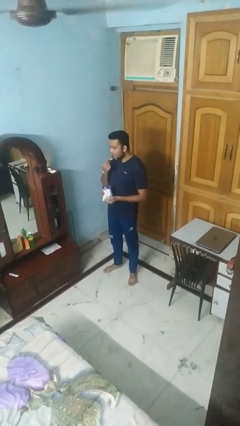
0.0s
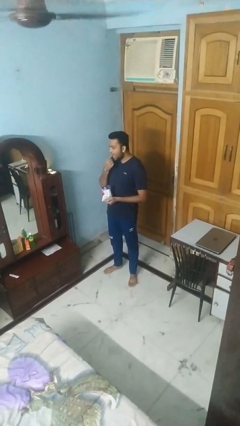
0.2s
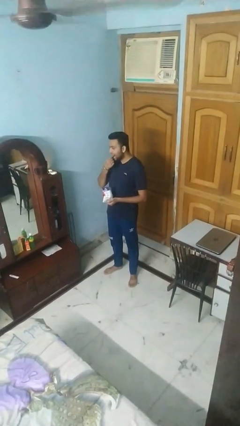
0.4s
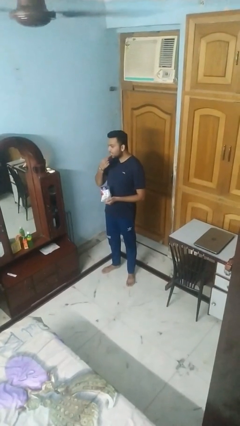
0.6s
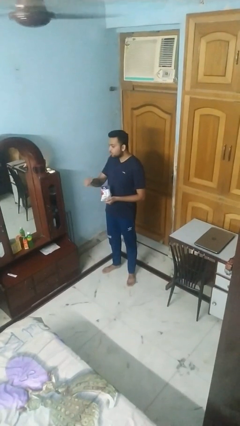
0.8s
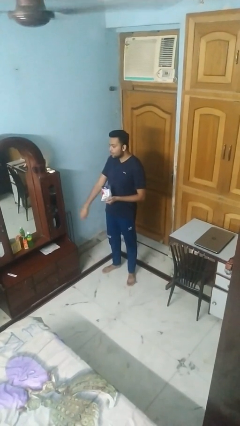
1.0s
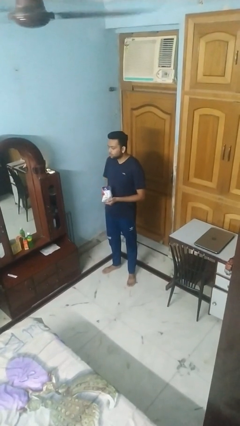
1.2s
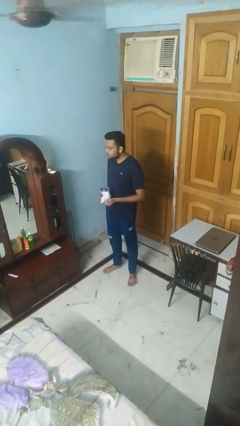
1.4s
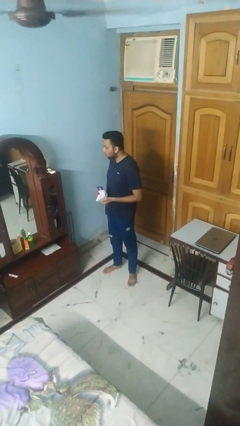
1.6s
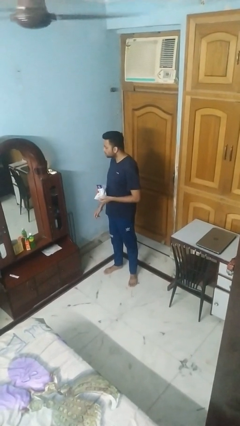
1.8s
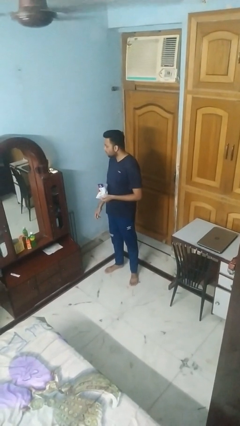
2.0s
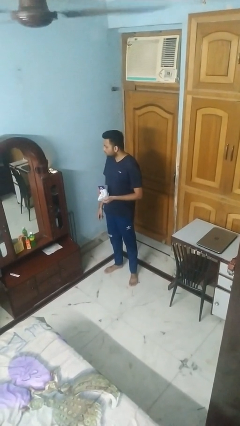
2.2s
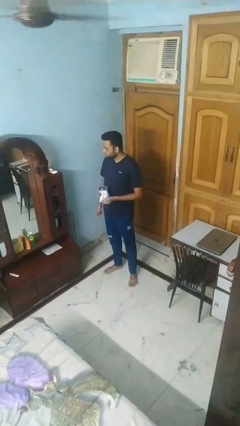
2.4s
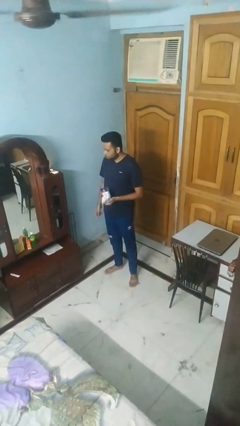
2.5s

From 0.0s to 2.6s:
person eats snack from bag

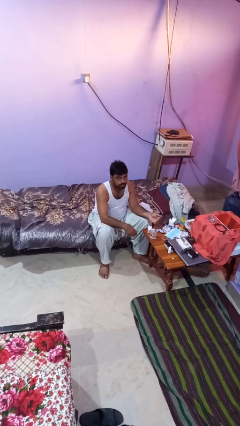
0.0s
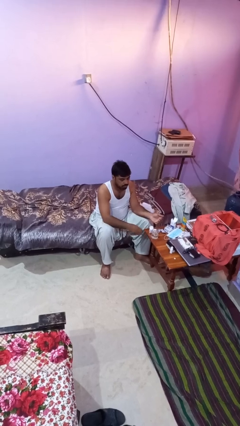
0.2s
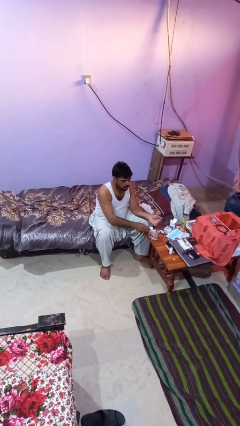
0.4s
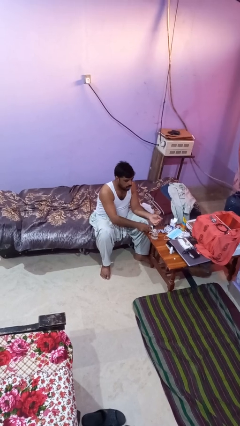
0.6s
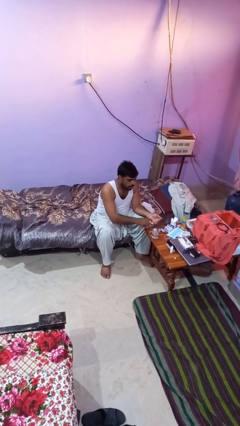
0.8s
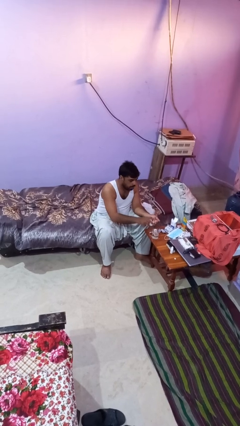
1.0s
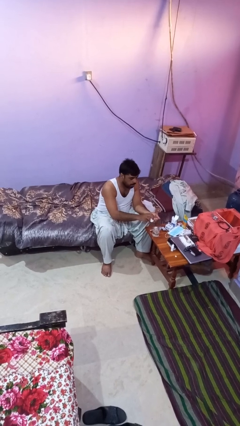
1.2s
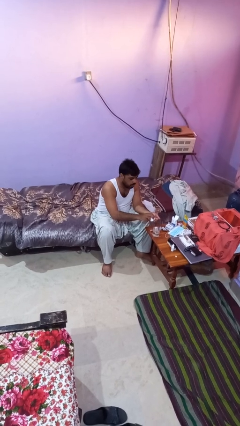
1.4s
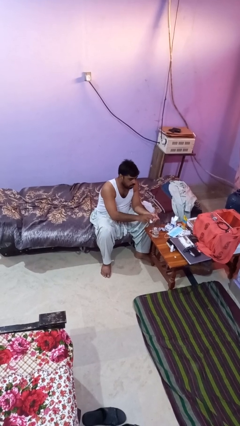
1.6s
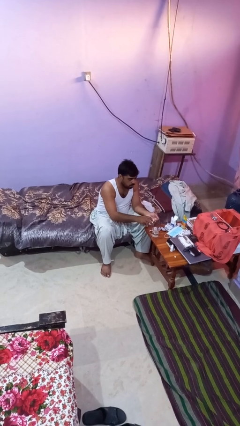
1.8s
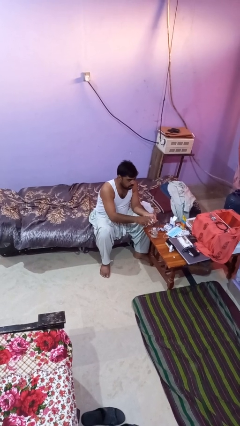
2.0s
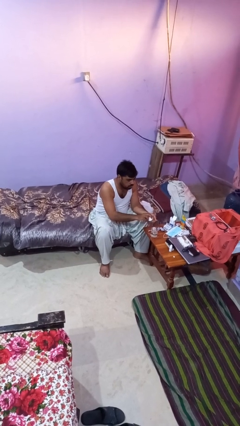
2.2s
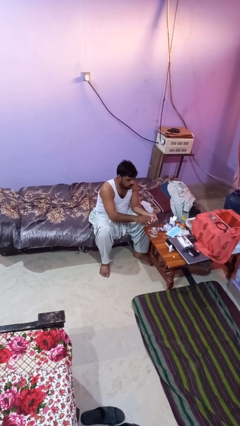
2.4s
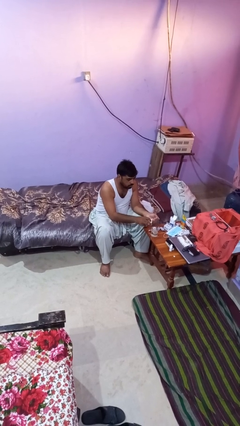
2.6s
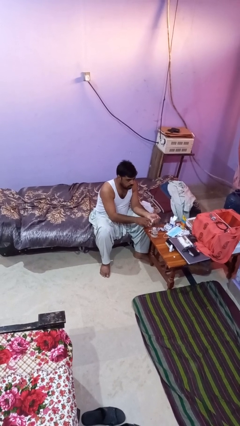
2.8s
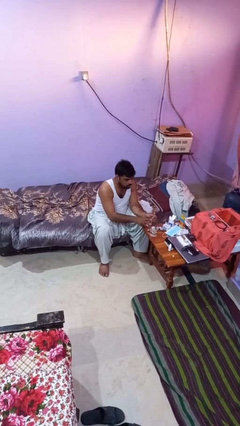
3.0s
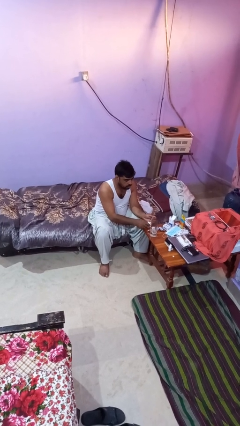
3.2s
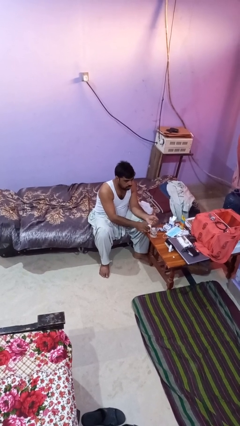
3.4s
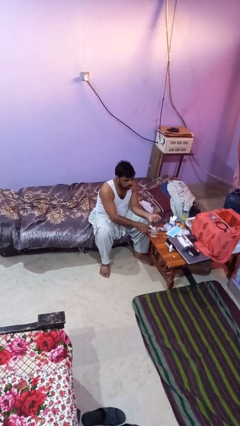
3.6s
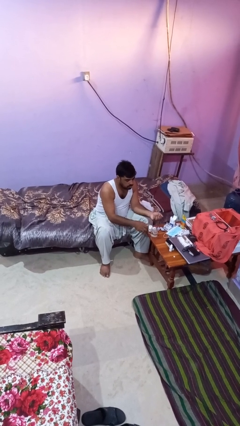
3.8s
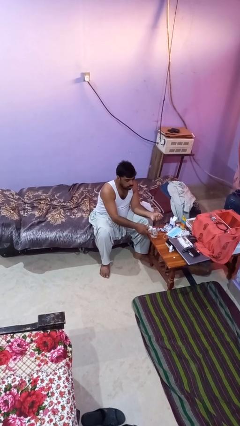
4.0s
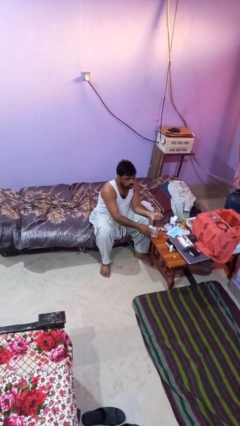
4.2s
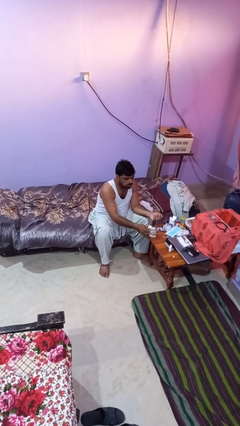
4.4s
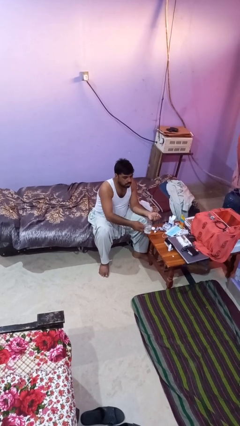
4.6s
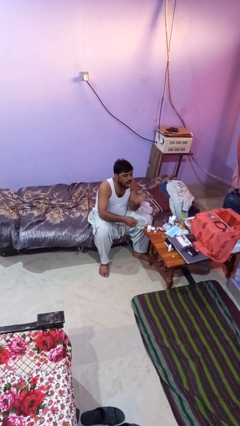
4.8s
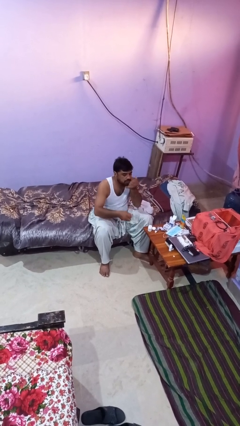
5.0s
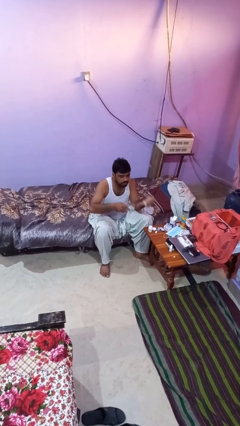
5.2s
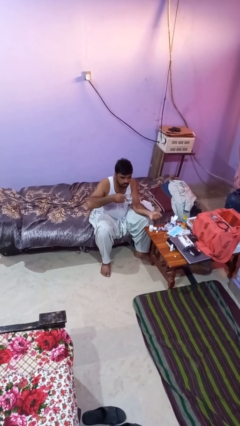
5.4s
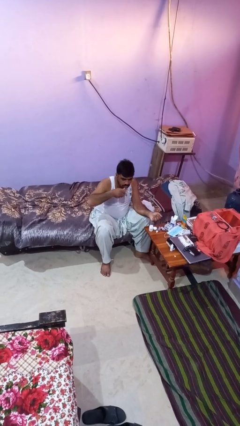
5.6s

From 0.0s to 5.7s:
person takes medicine pills

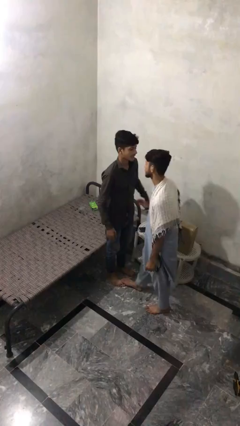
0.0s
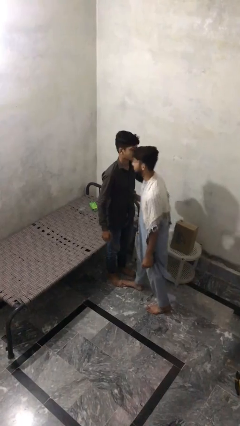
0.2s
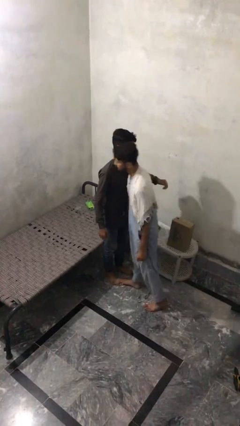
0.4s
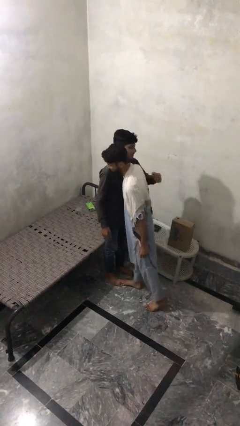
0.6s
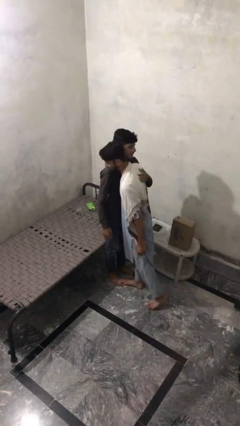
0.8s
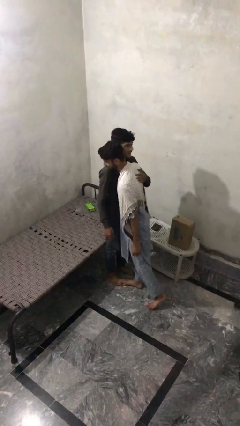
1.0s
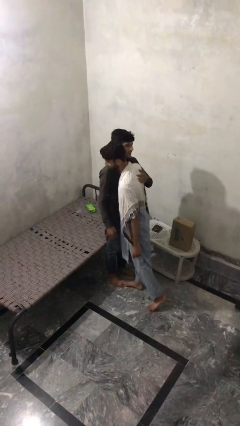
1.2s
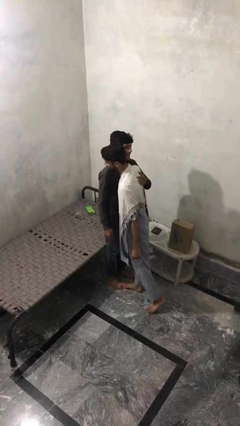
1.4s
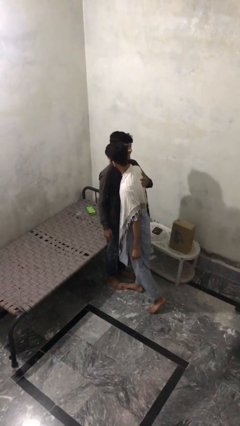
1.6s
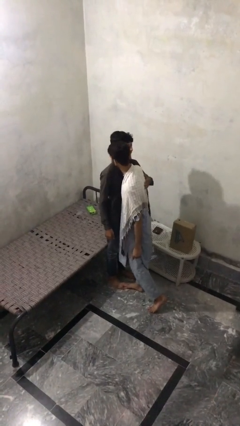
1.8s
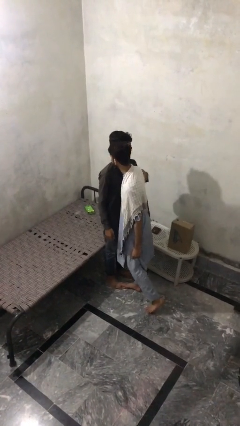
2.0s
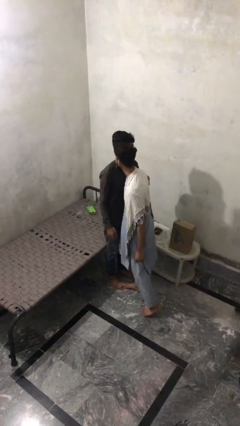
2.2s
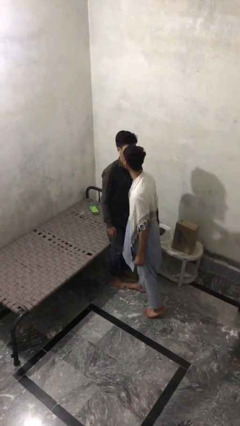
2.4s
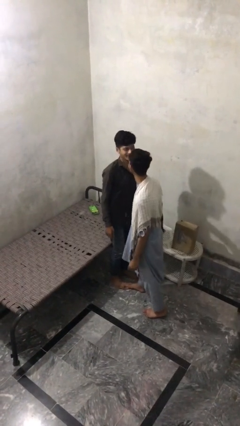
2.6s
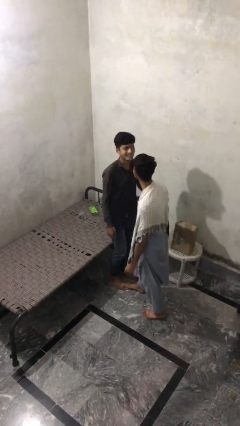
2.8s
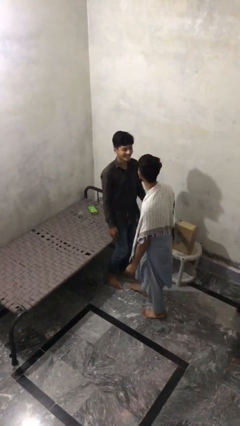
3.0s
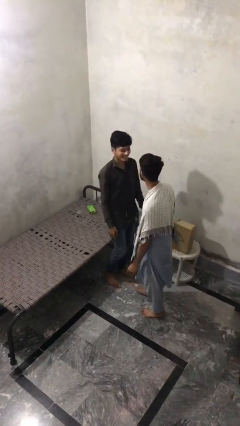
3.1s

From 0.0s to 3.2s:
person embraces person

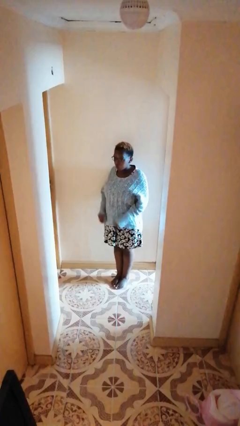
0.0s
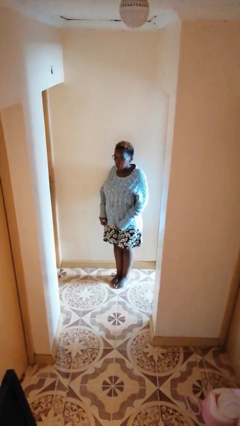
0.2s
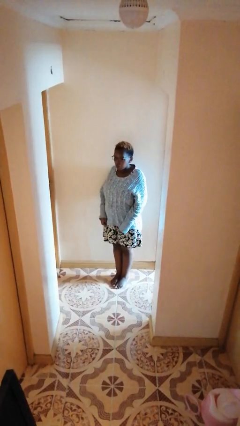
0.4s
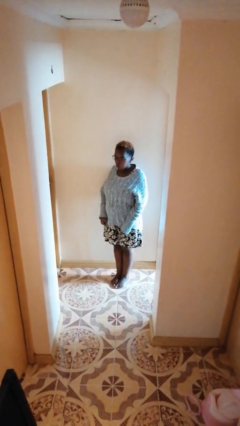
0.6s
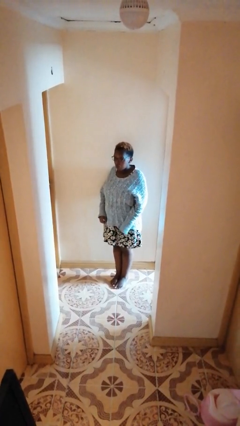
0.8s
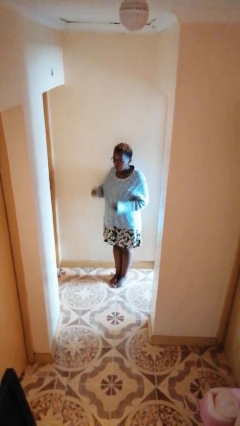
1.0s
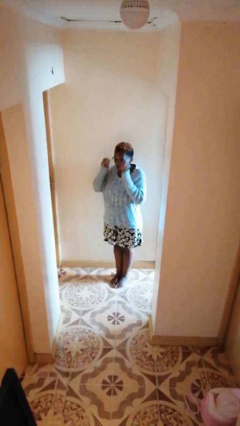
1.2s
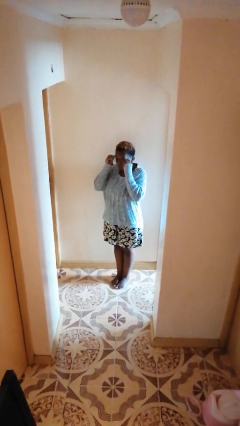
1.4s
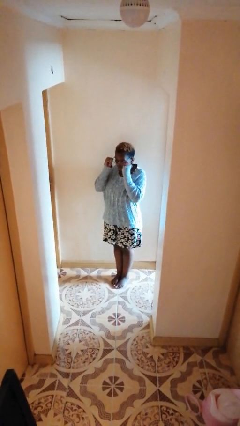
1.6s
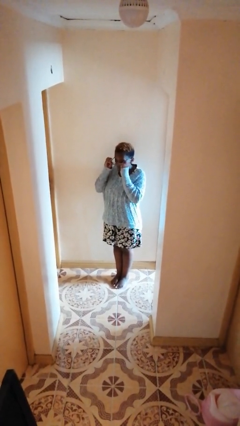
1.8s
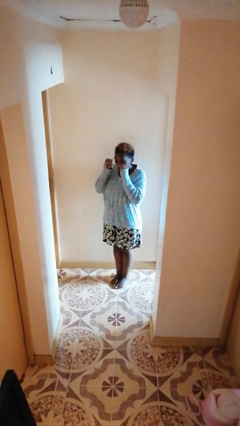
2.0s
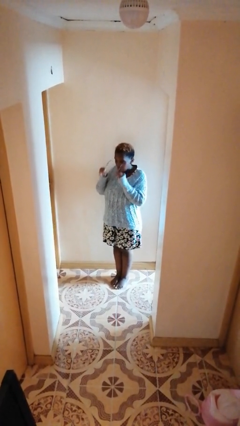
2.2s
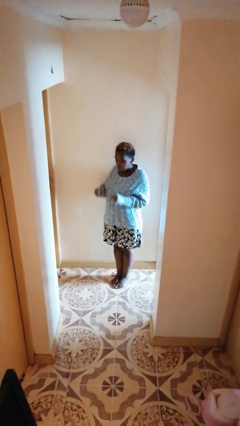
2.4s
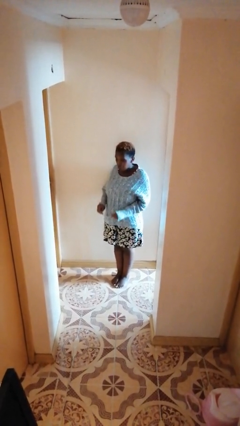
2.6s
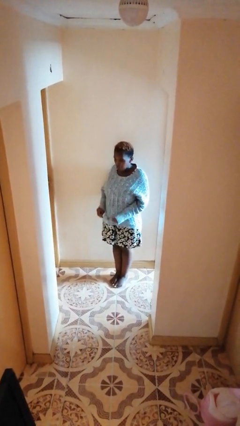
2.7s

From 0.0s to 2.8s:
person takes off glasses

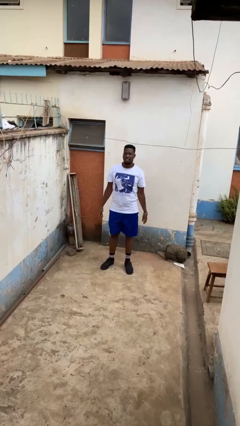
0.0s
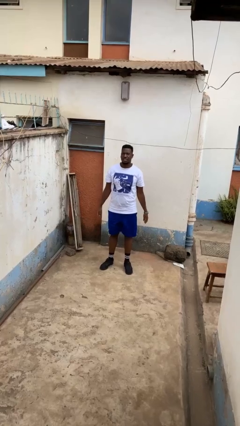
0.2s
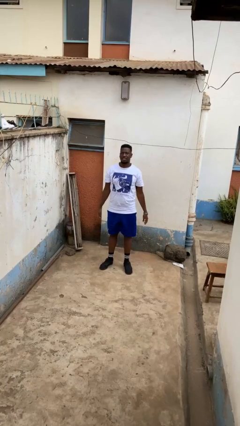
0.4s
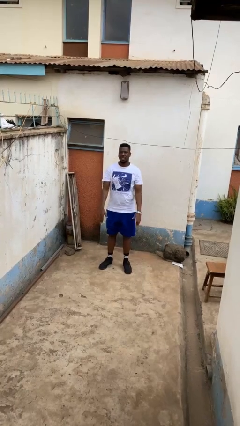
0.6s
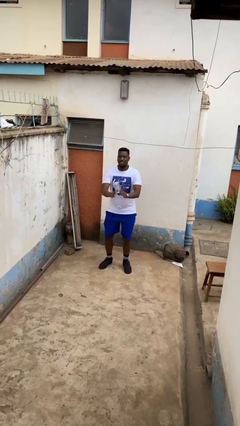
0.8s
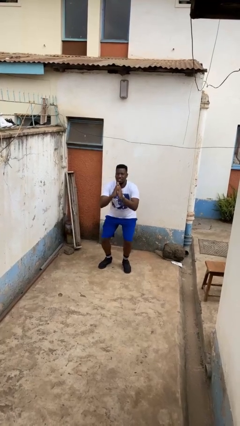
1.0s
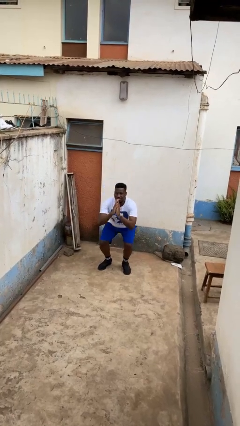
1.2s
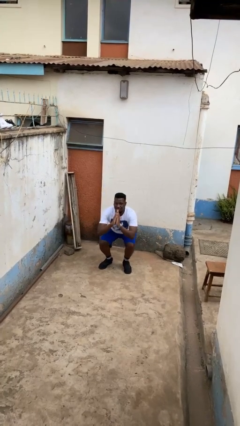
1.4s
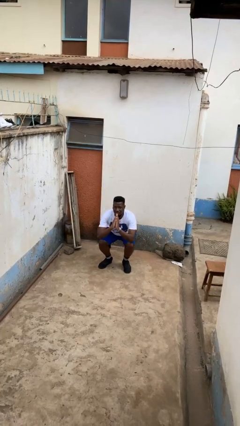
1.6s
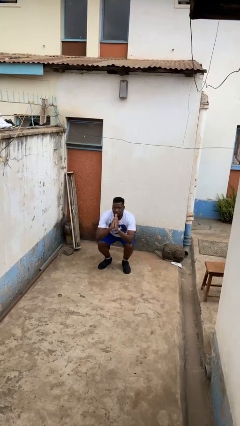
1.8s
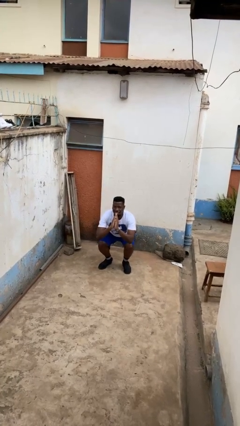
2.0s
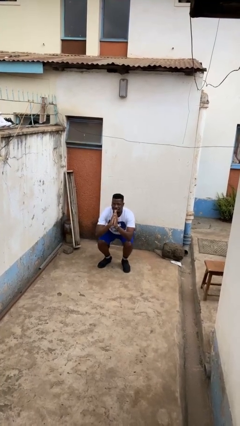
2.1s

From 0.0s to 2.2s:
person squats

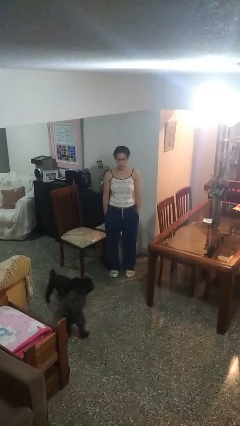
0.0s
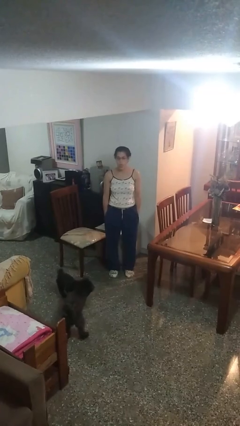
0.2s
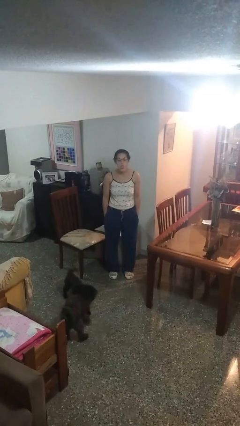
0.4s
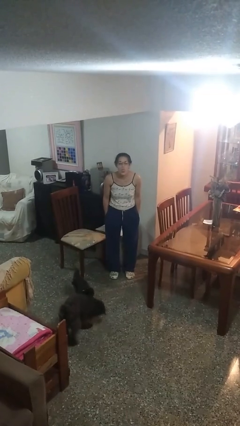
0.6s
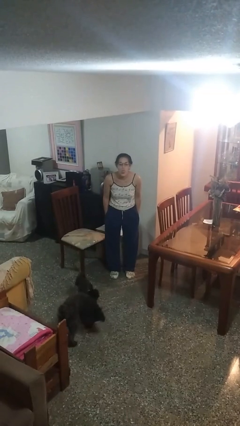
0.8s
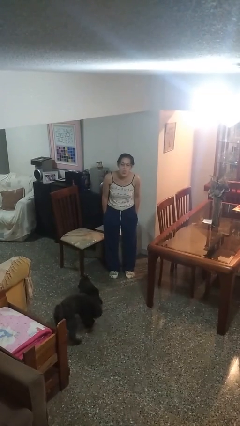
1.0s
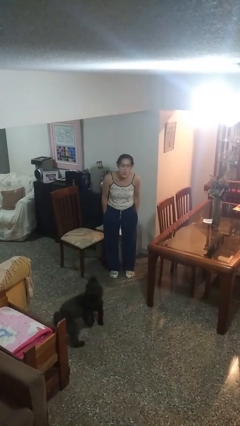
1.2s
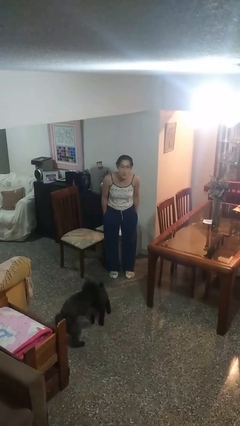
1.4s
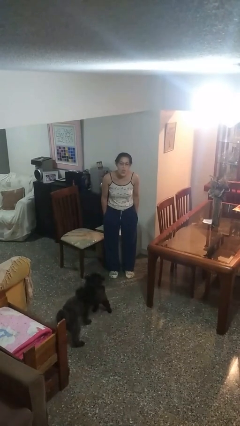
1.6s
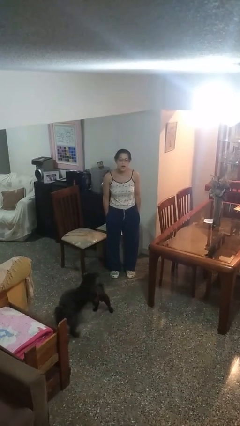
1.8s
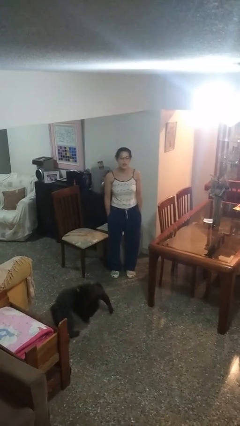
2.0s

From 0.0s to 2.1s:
person sticks out tongue
